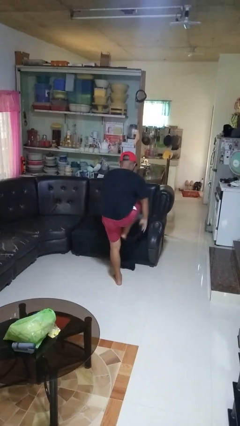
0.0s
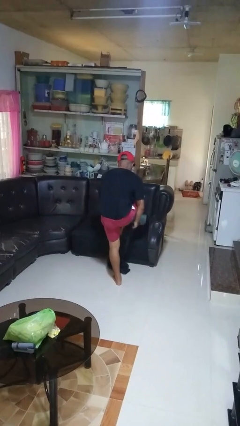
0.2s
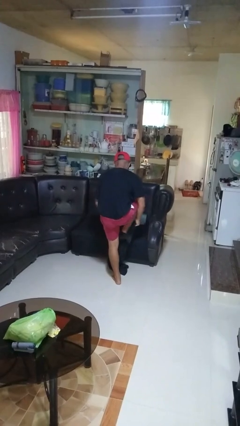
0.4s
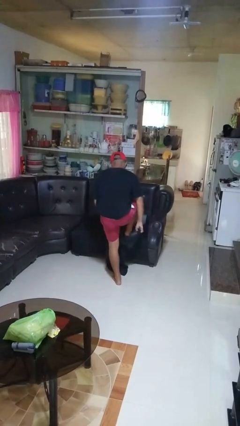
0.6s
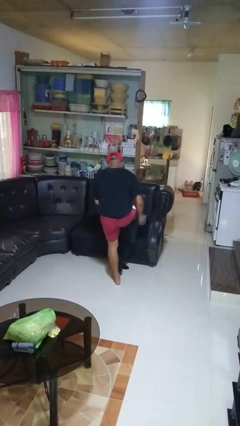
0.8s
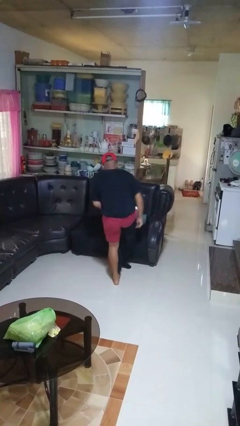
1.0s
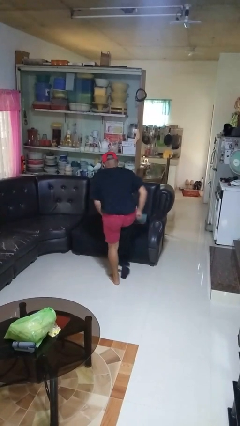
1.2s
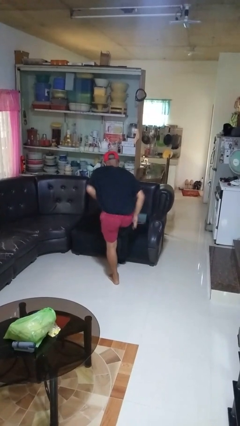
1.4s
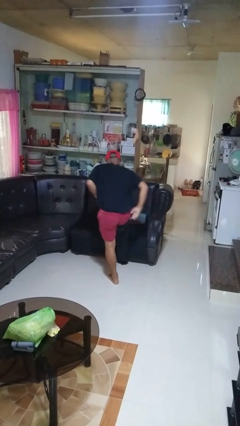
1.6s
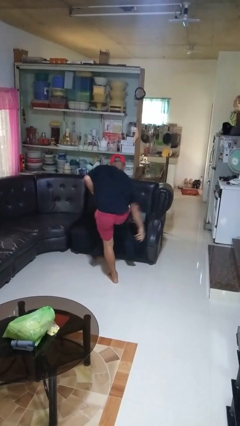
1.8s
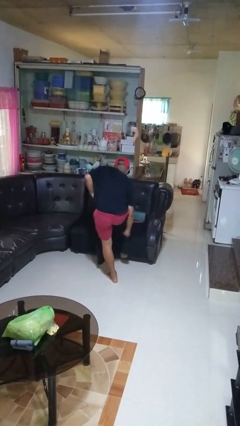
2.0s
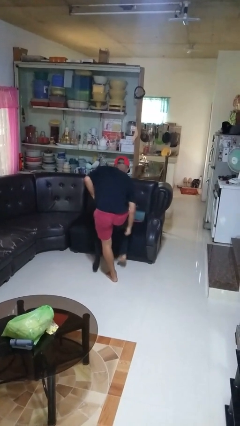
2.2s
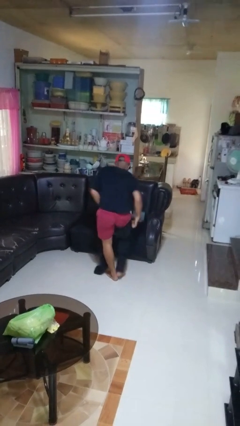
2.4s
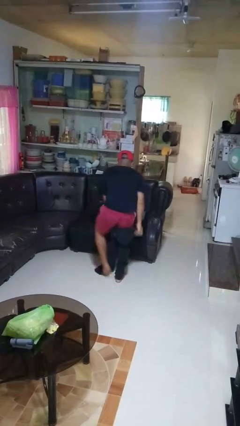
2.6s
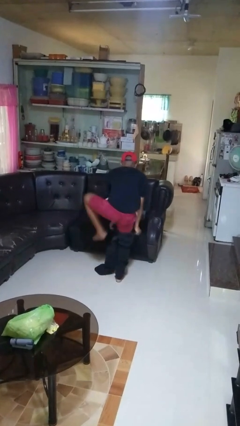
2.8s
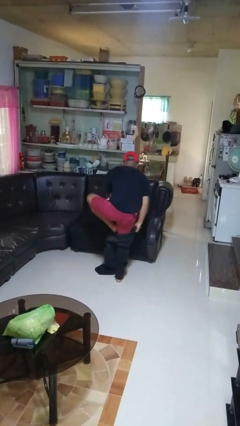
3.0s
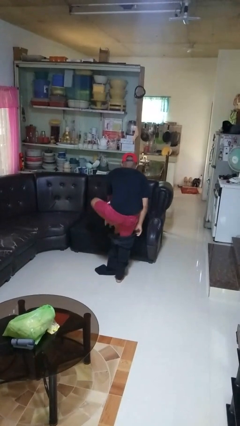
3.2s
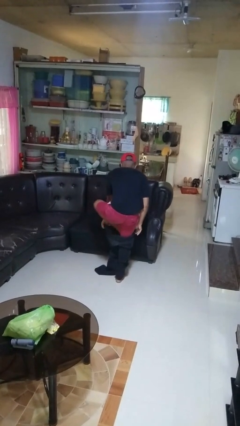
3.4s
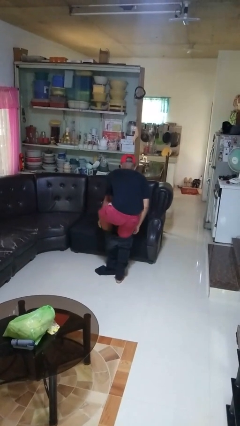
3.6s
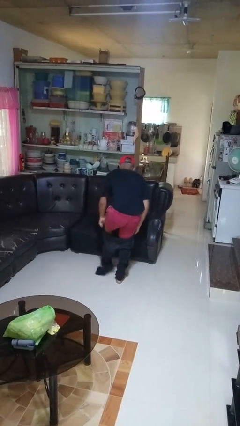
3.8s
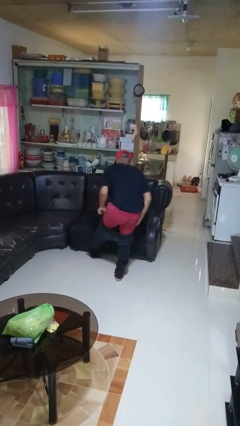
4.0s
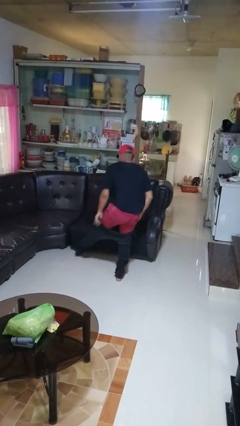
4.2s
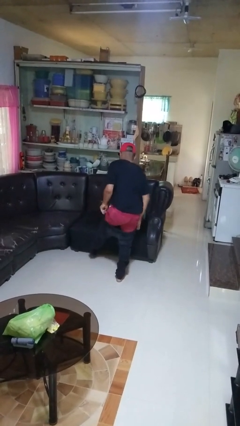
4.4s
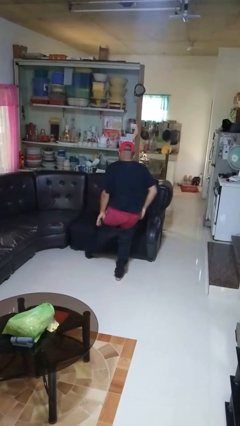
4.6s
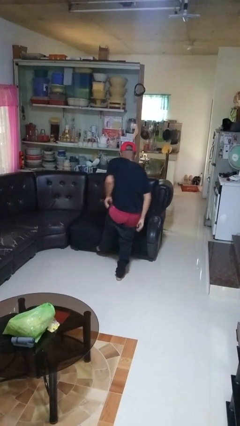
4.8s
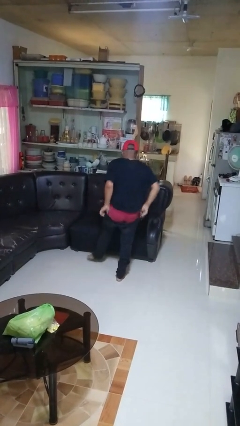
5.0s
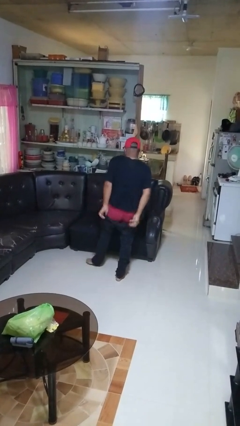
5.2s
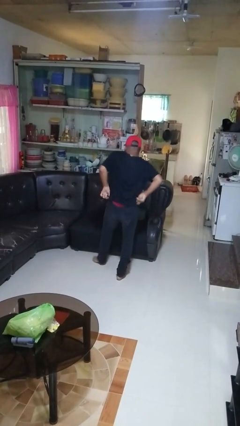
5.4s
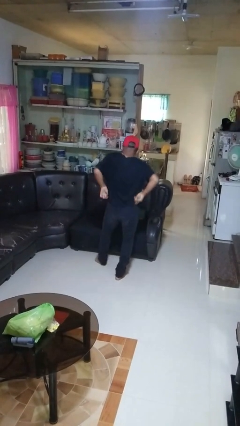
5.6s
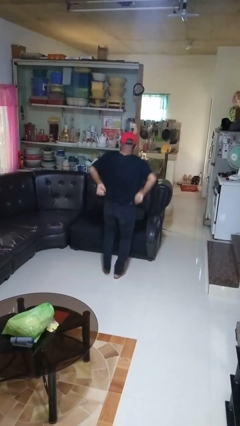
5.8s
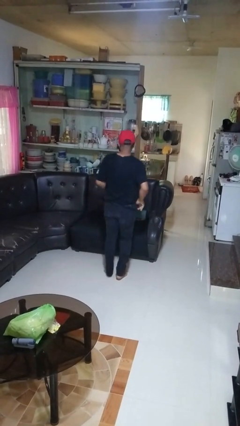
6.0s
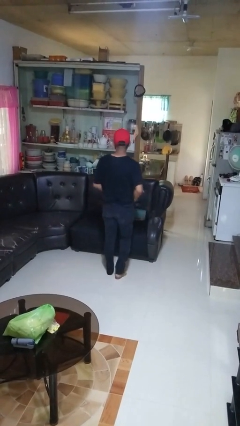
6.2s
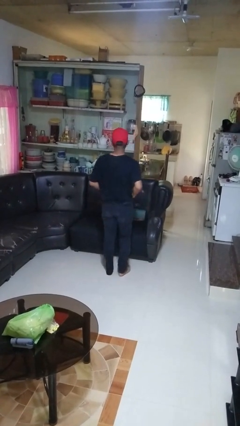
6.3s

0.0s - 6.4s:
person puts on pants

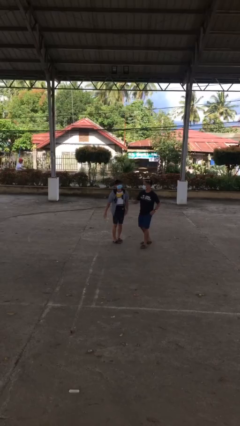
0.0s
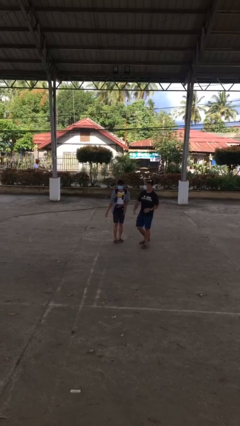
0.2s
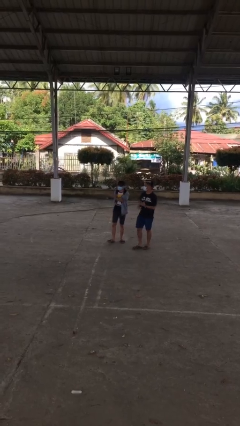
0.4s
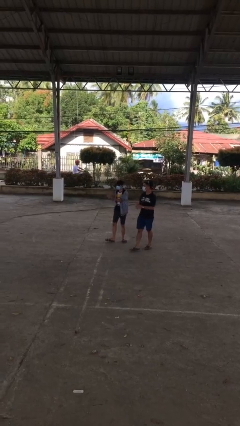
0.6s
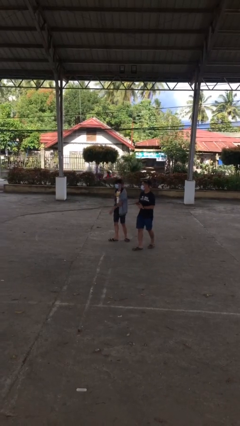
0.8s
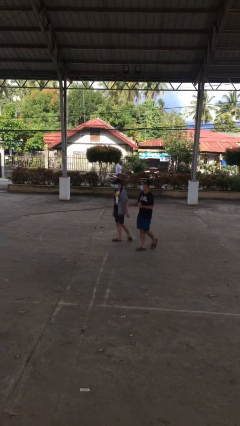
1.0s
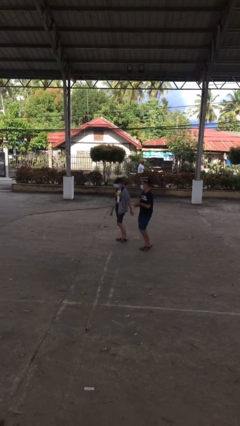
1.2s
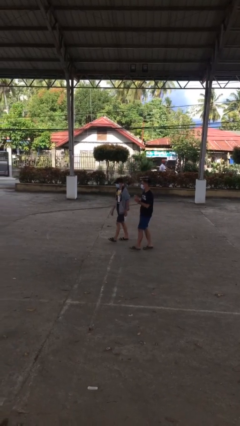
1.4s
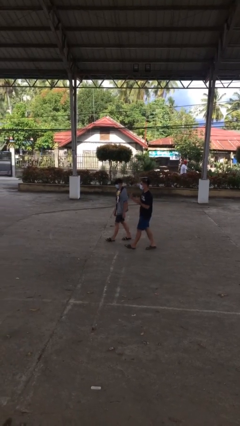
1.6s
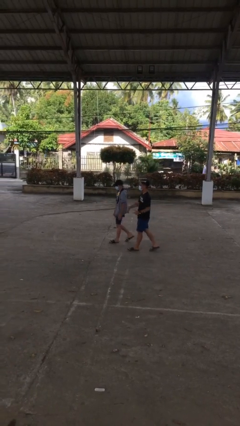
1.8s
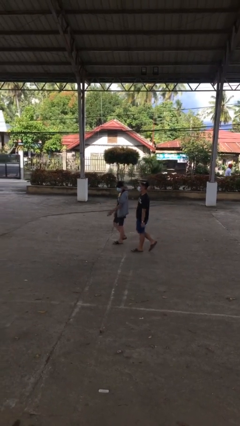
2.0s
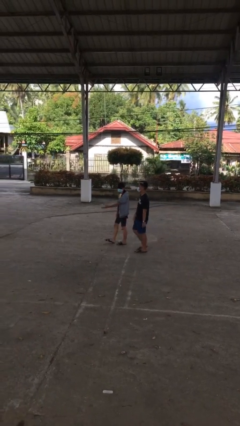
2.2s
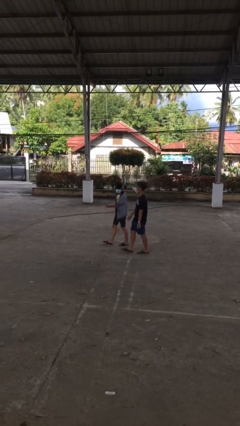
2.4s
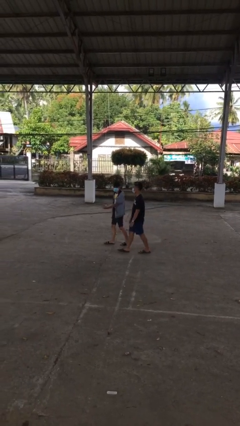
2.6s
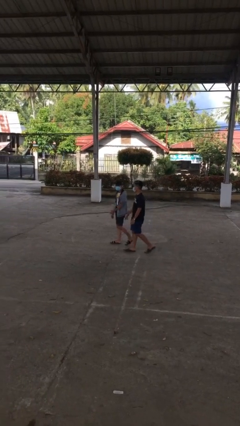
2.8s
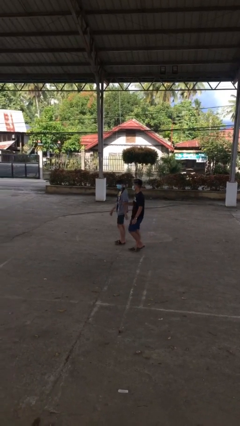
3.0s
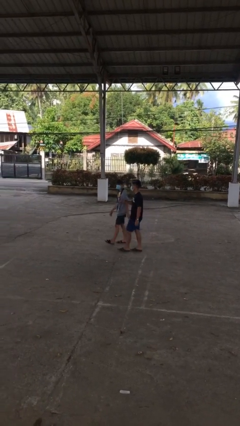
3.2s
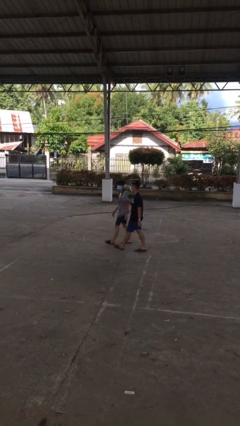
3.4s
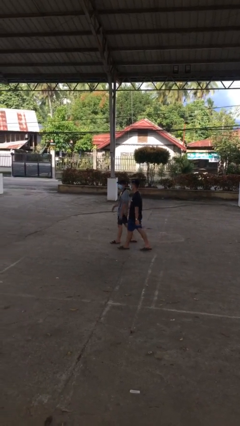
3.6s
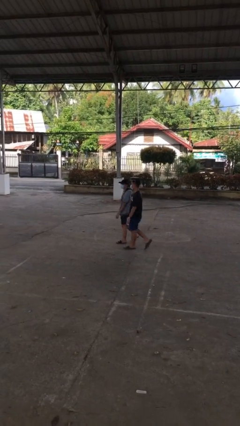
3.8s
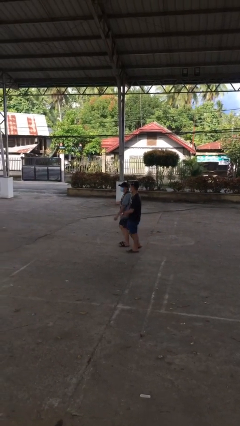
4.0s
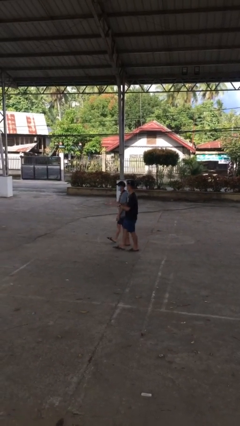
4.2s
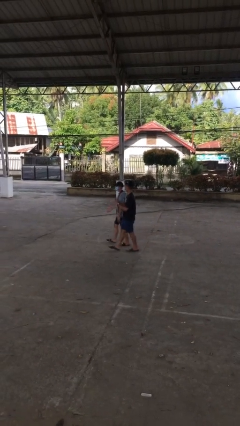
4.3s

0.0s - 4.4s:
person talks to person

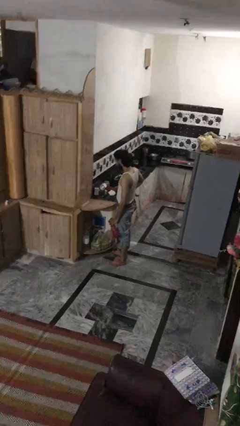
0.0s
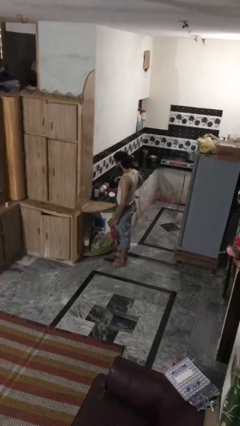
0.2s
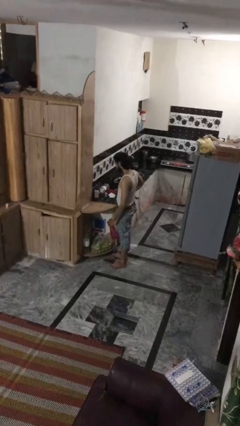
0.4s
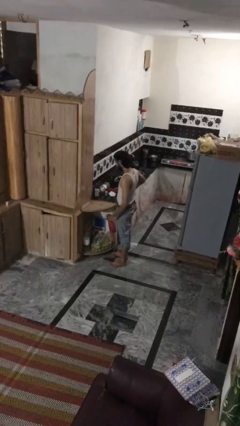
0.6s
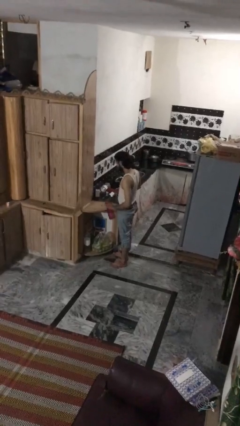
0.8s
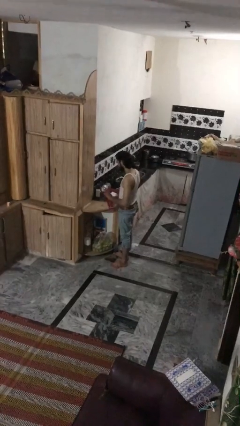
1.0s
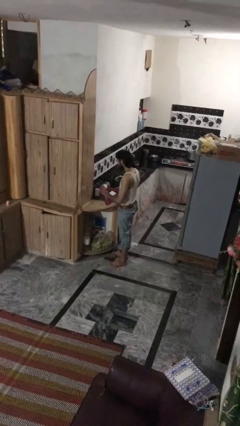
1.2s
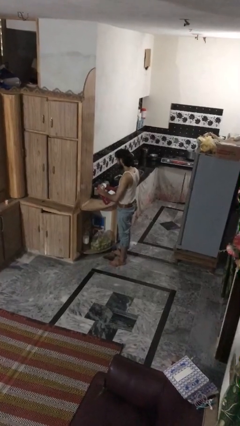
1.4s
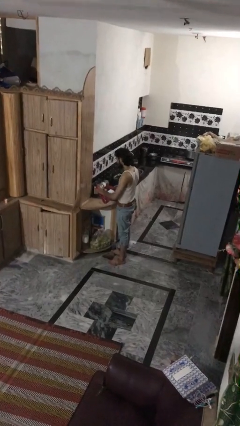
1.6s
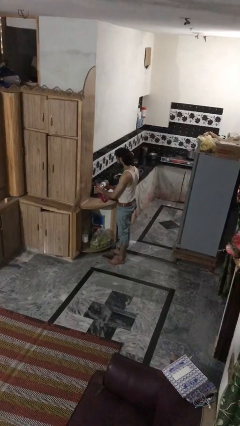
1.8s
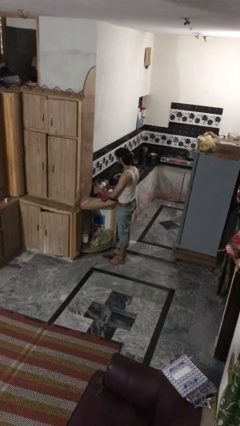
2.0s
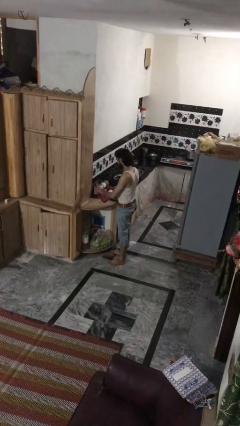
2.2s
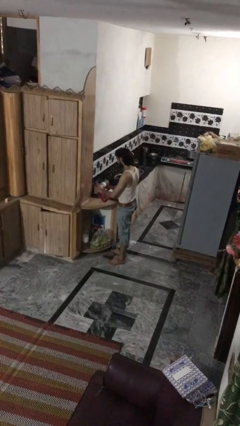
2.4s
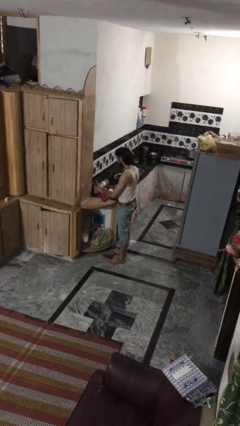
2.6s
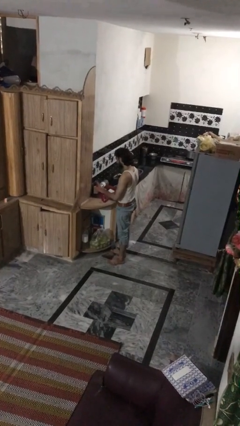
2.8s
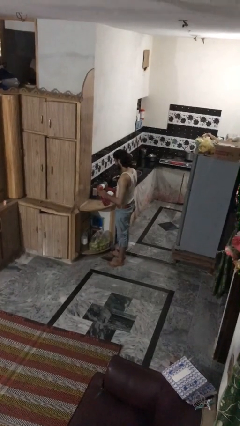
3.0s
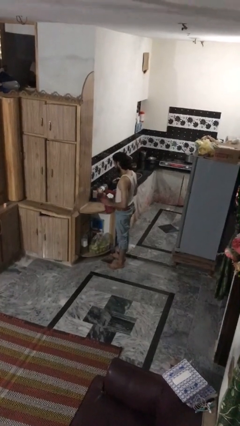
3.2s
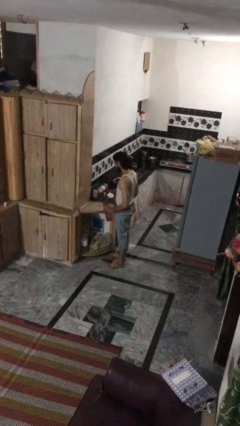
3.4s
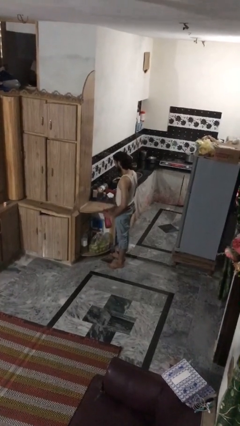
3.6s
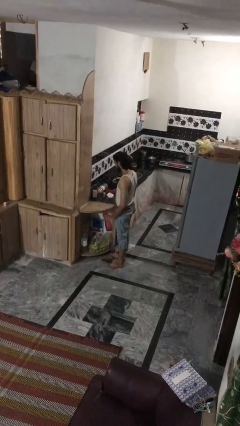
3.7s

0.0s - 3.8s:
person sprays from bottle

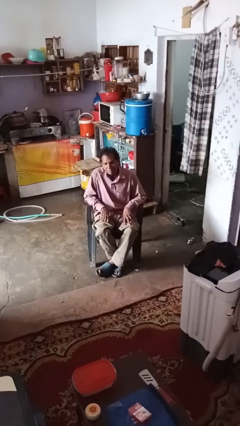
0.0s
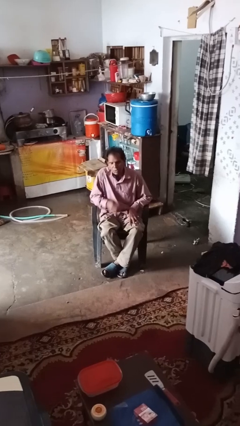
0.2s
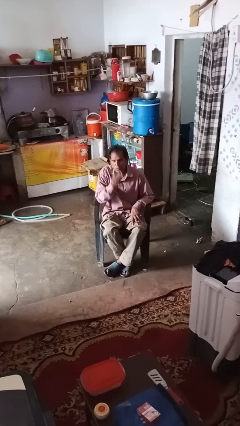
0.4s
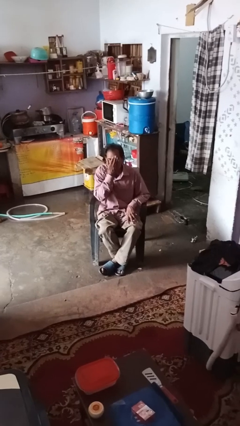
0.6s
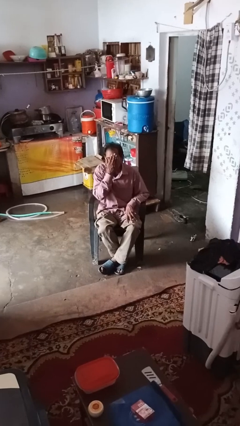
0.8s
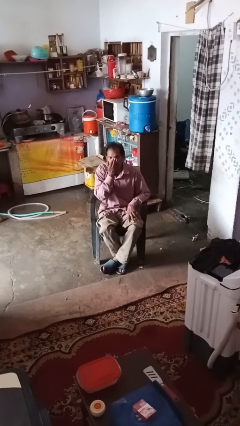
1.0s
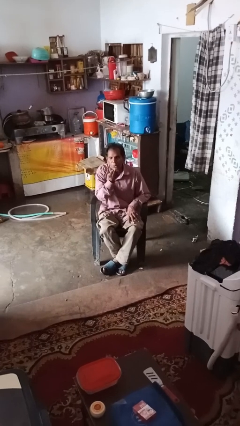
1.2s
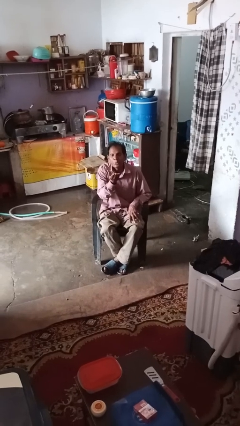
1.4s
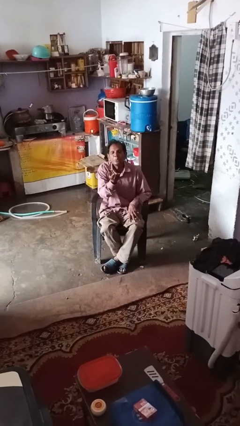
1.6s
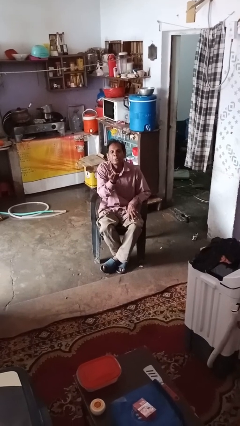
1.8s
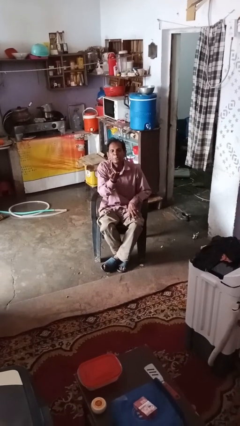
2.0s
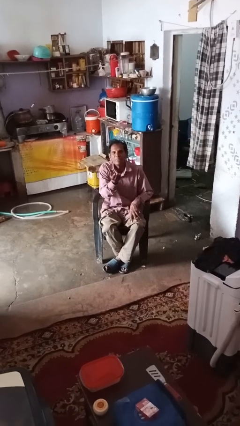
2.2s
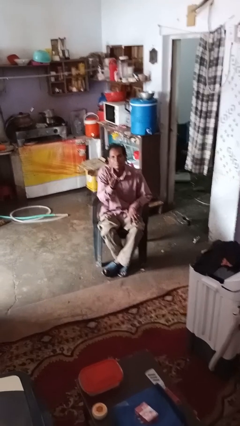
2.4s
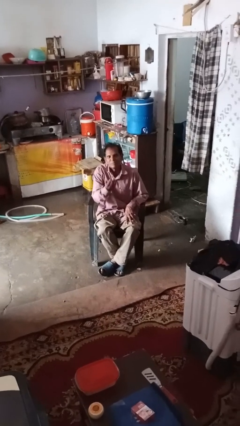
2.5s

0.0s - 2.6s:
person gestures blow kiss

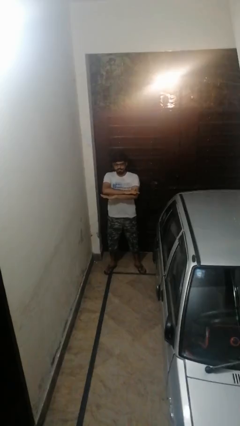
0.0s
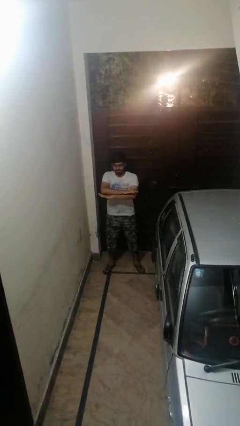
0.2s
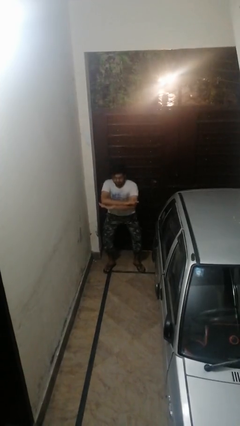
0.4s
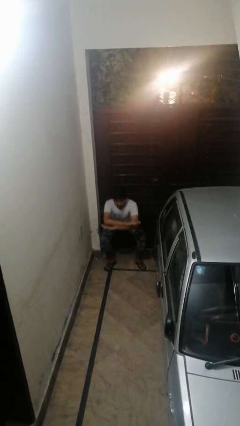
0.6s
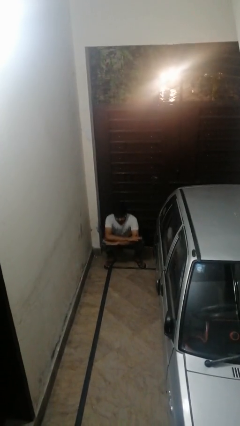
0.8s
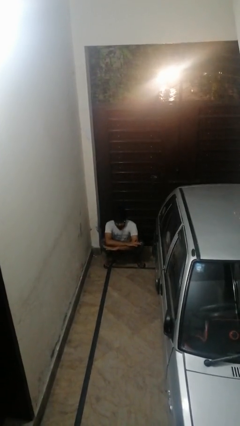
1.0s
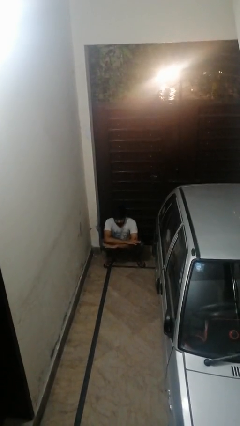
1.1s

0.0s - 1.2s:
person squats
